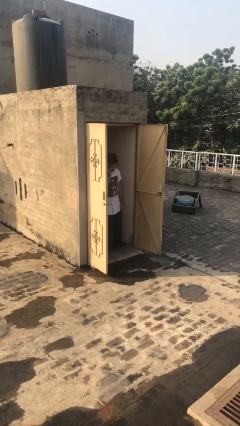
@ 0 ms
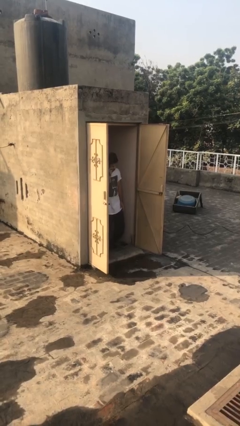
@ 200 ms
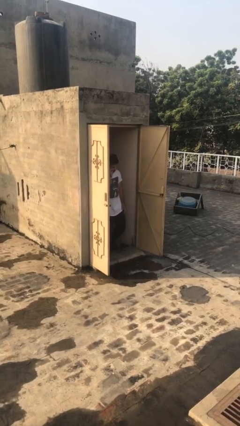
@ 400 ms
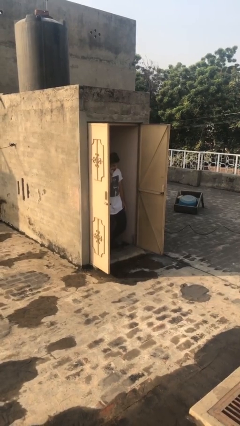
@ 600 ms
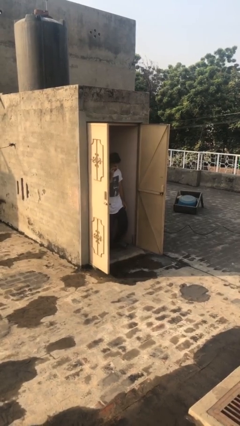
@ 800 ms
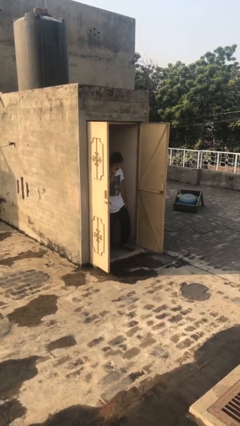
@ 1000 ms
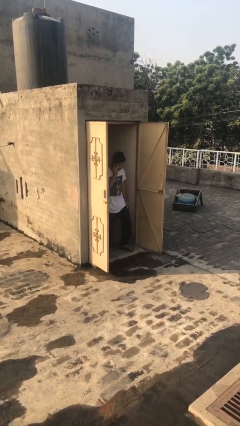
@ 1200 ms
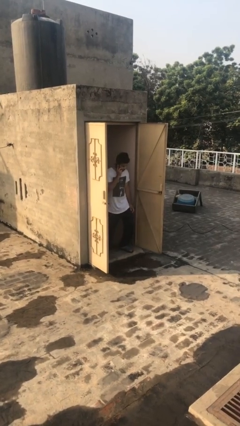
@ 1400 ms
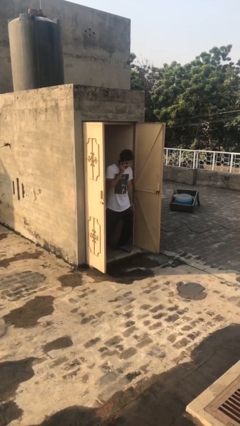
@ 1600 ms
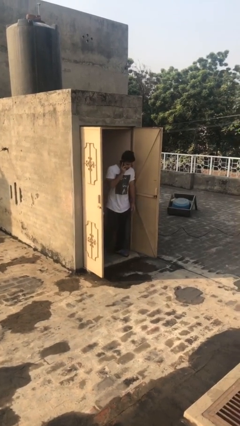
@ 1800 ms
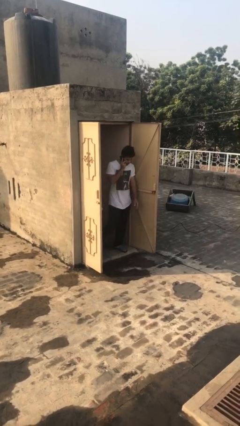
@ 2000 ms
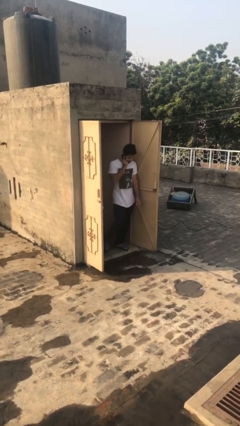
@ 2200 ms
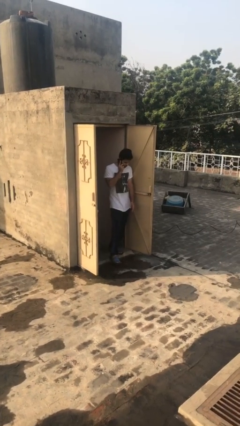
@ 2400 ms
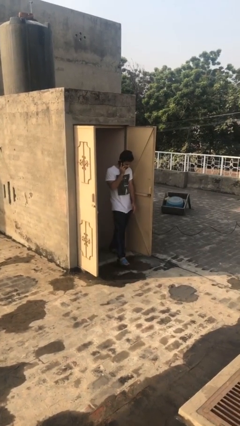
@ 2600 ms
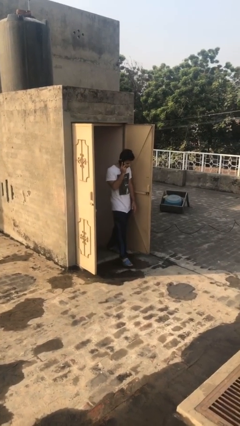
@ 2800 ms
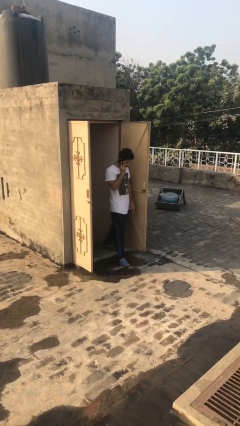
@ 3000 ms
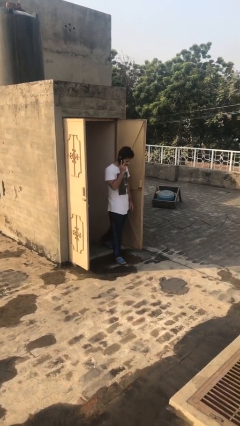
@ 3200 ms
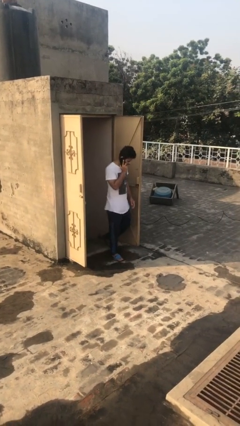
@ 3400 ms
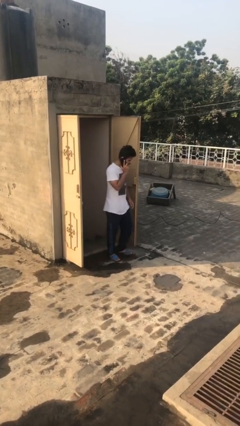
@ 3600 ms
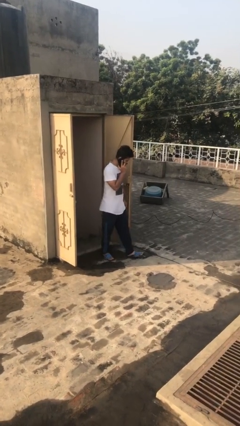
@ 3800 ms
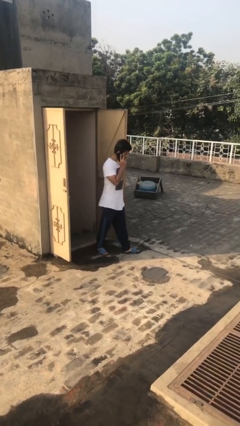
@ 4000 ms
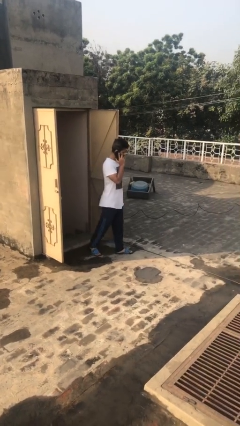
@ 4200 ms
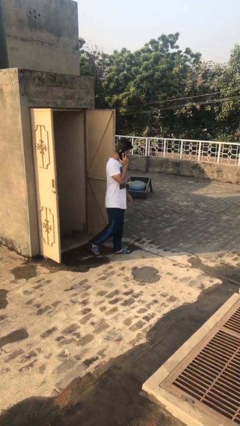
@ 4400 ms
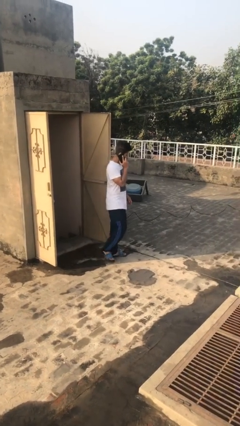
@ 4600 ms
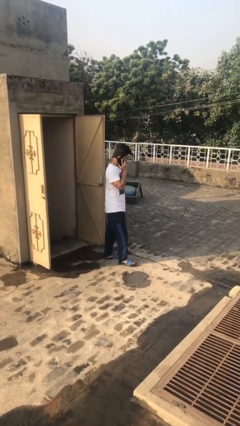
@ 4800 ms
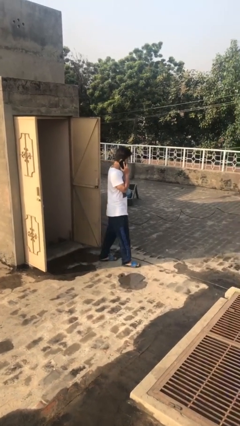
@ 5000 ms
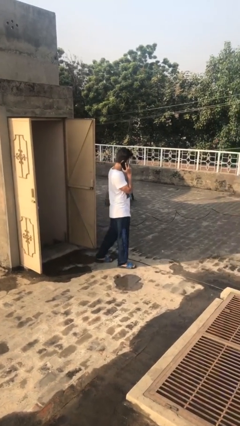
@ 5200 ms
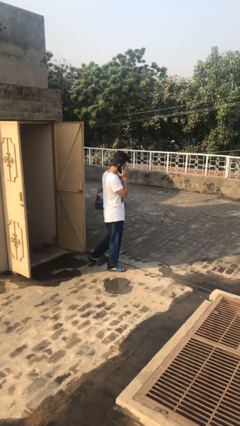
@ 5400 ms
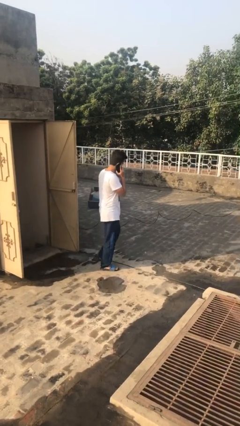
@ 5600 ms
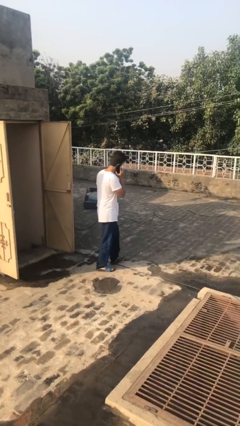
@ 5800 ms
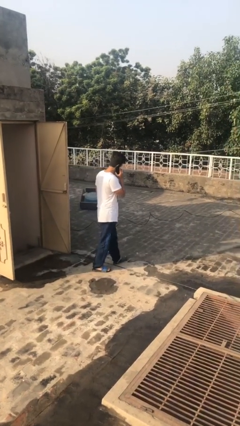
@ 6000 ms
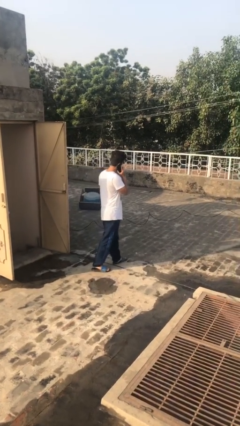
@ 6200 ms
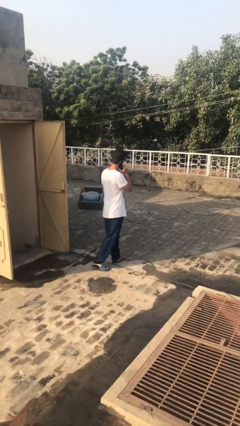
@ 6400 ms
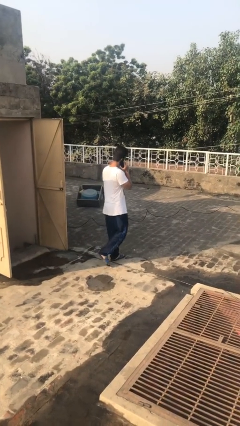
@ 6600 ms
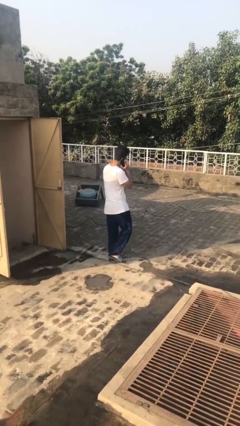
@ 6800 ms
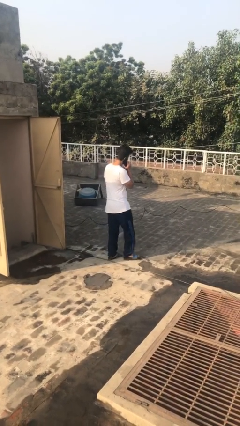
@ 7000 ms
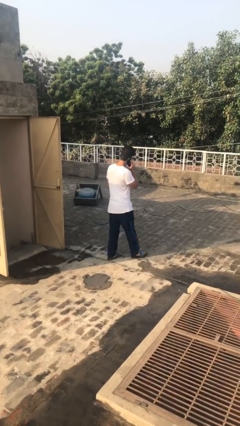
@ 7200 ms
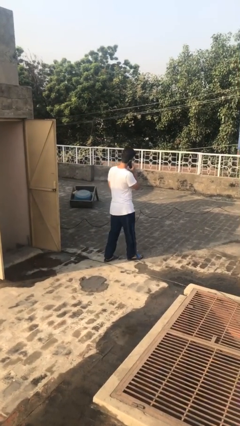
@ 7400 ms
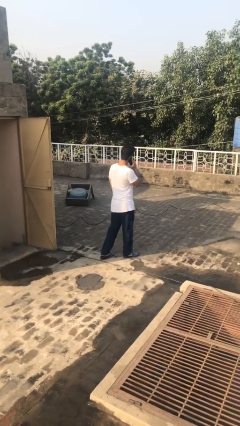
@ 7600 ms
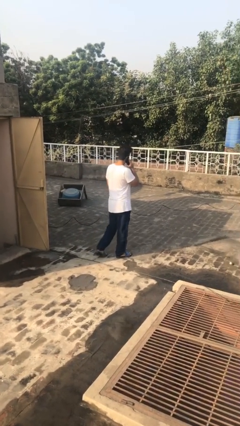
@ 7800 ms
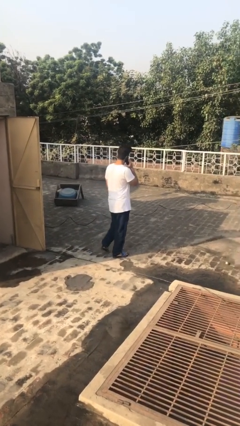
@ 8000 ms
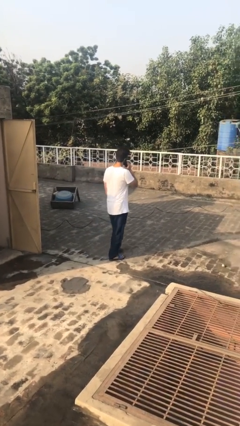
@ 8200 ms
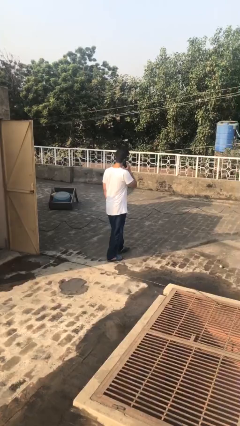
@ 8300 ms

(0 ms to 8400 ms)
person enters scene through structure

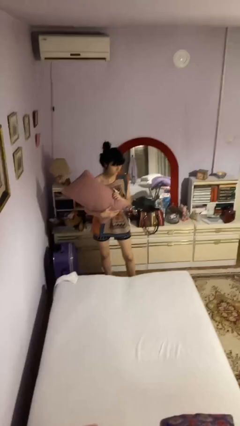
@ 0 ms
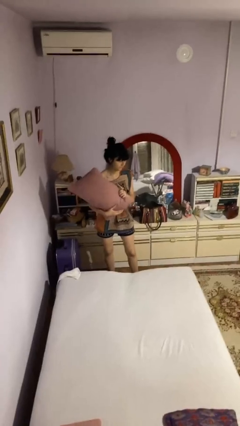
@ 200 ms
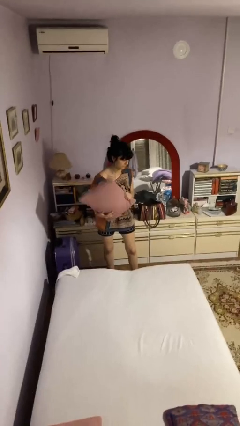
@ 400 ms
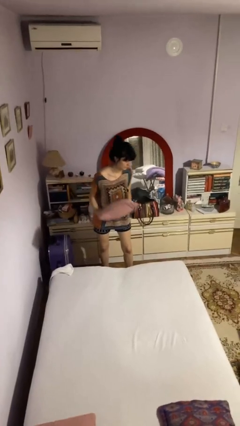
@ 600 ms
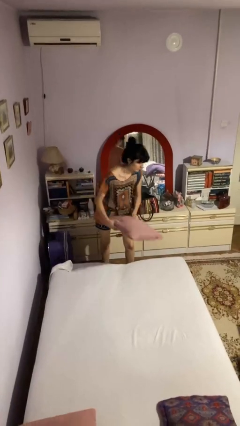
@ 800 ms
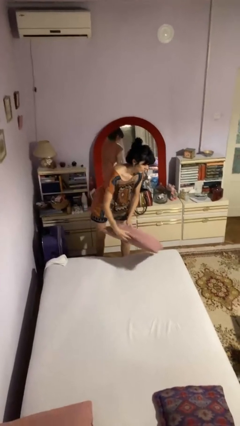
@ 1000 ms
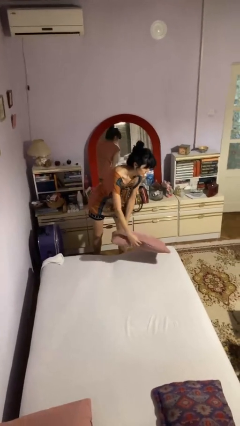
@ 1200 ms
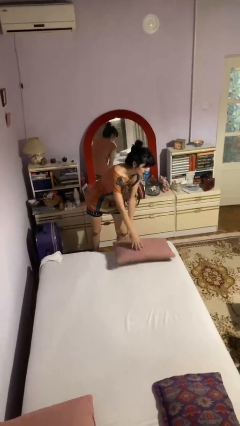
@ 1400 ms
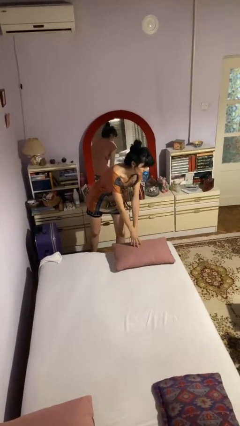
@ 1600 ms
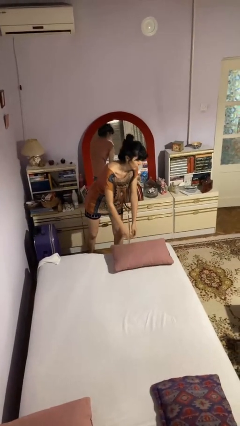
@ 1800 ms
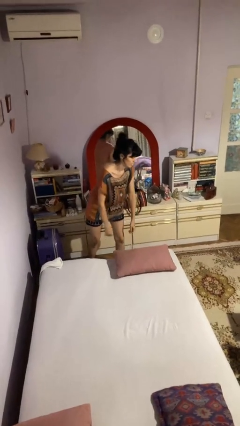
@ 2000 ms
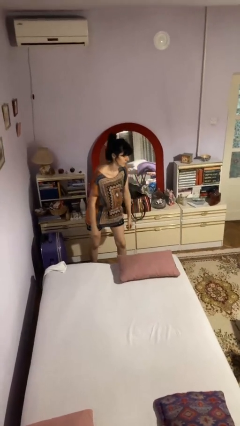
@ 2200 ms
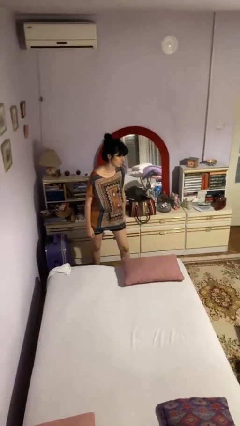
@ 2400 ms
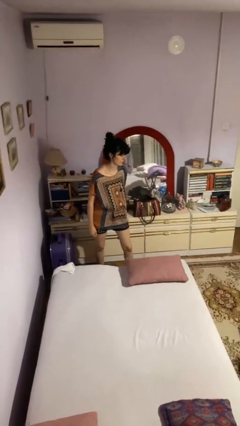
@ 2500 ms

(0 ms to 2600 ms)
person puts down object on bed

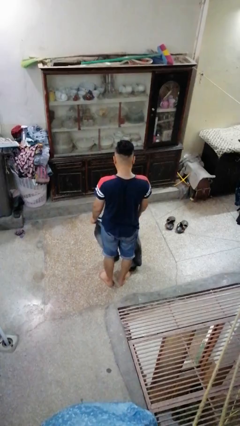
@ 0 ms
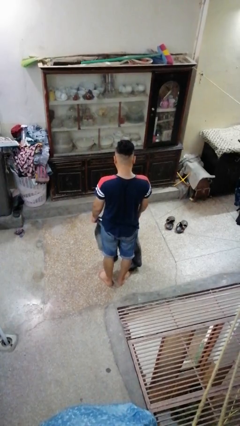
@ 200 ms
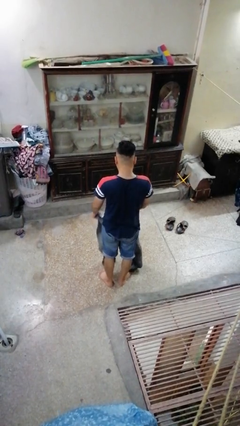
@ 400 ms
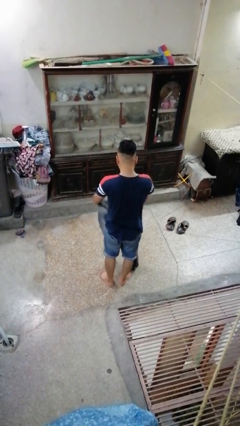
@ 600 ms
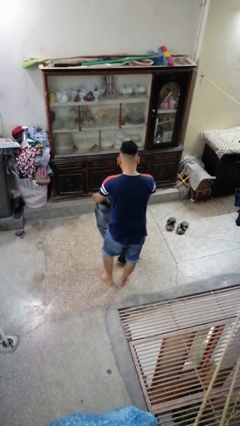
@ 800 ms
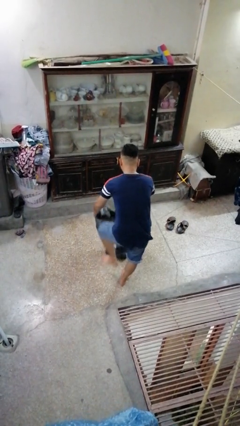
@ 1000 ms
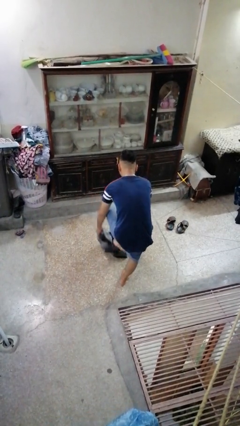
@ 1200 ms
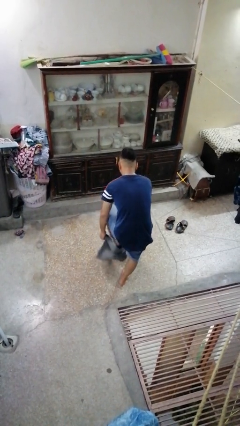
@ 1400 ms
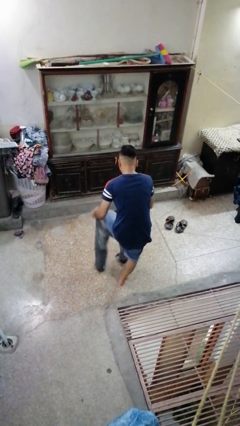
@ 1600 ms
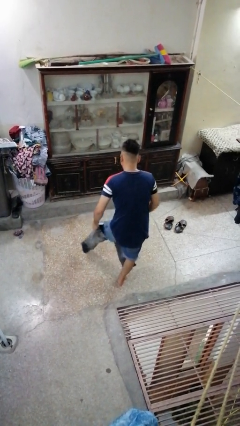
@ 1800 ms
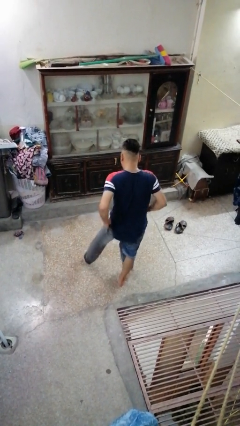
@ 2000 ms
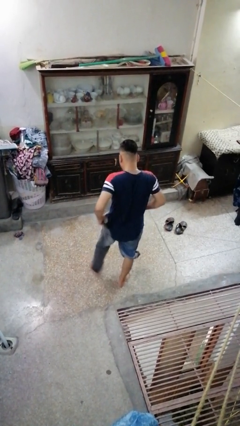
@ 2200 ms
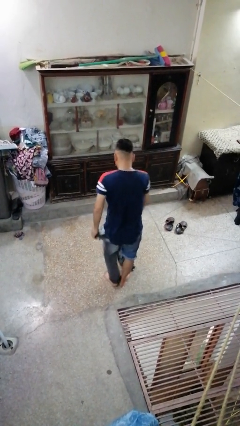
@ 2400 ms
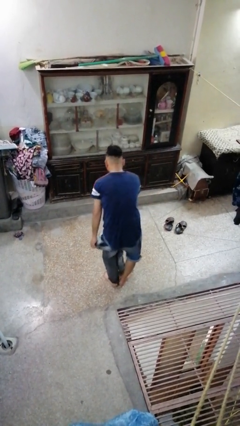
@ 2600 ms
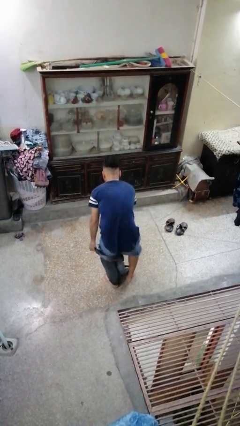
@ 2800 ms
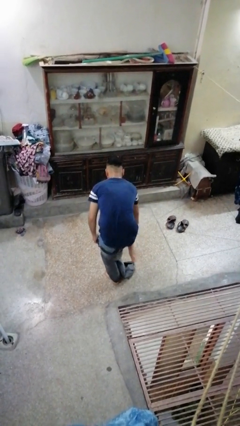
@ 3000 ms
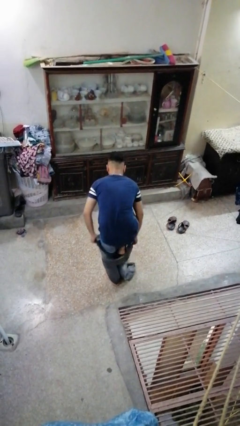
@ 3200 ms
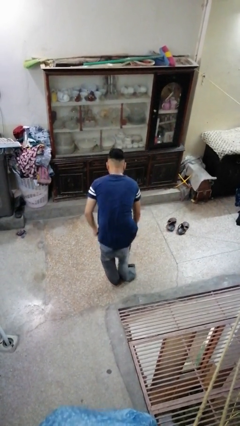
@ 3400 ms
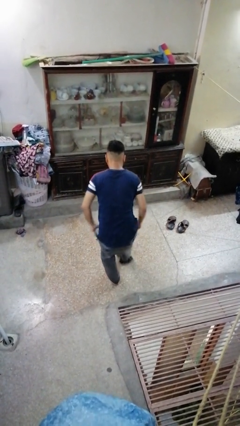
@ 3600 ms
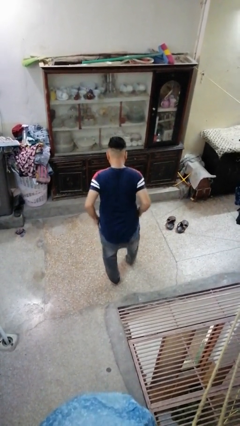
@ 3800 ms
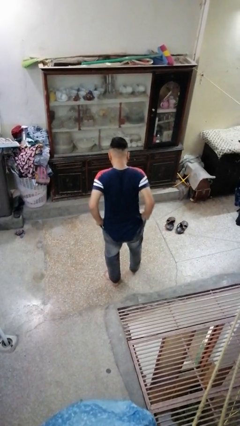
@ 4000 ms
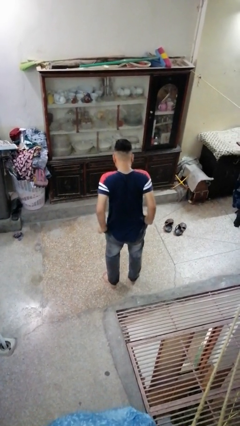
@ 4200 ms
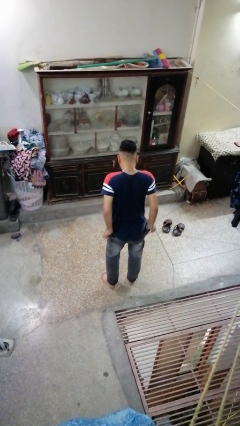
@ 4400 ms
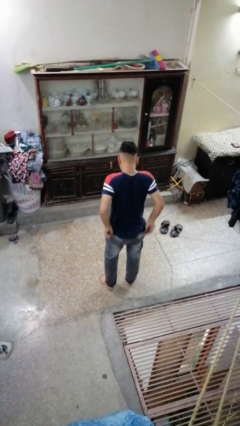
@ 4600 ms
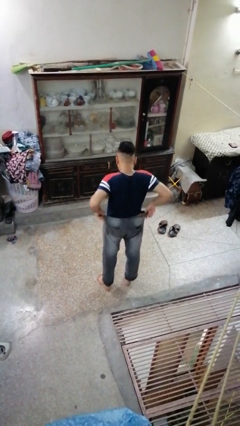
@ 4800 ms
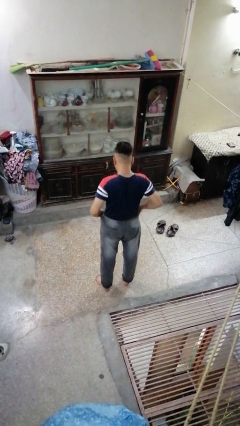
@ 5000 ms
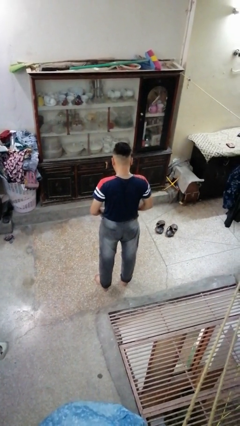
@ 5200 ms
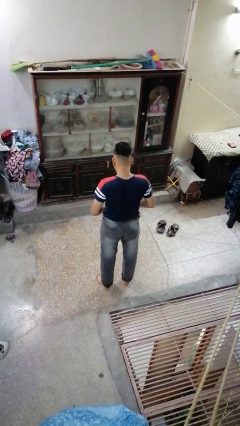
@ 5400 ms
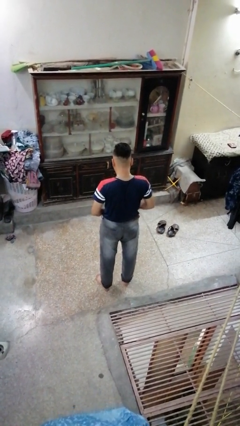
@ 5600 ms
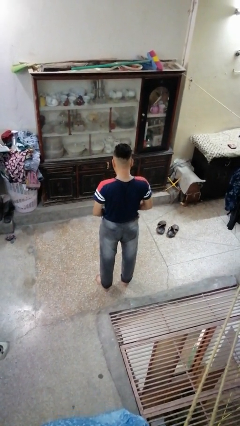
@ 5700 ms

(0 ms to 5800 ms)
person puts on pants

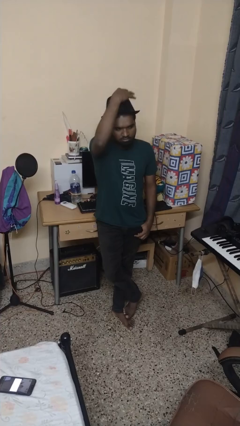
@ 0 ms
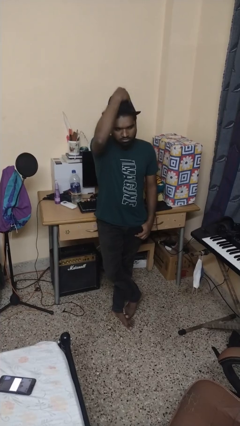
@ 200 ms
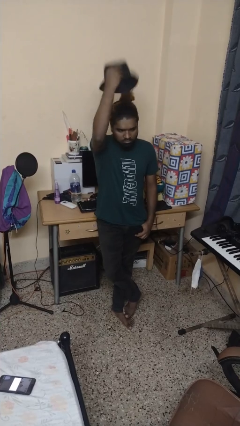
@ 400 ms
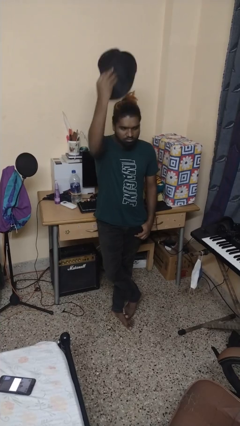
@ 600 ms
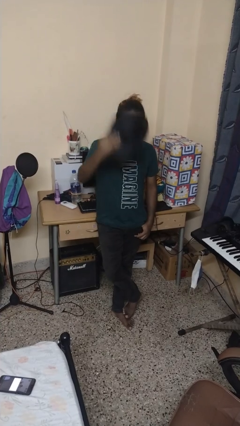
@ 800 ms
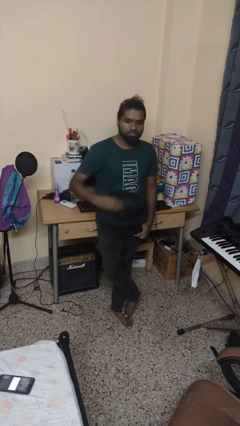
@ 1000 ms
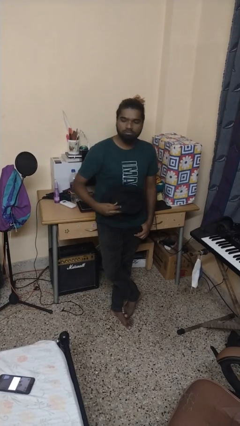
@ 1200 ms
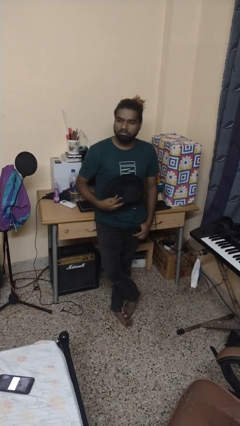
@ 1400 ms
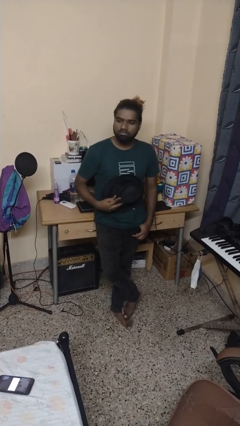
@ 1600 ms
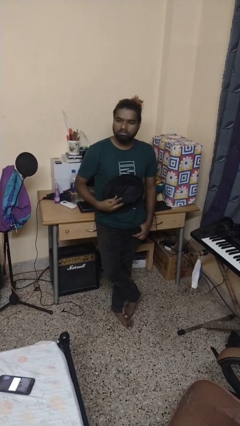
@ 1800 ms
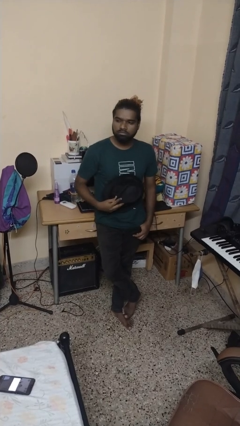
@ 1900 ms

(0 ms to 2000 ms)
person takes off hat
